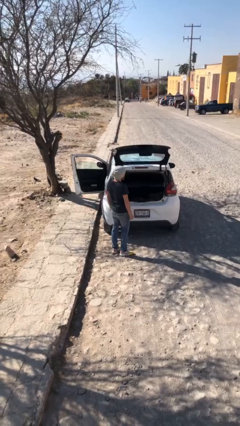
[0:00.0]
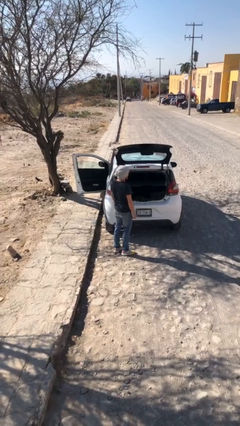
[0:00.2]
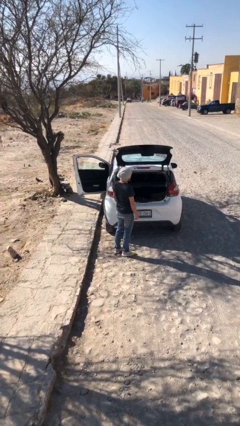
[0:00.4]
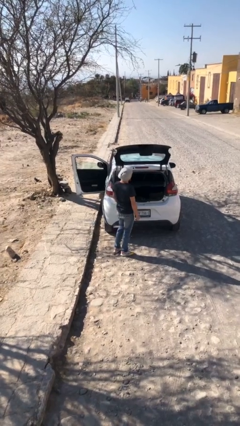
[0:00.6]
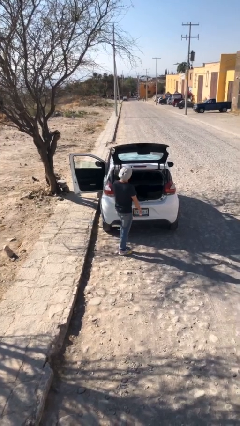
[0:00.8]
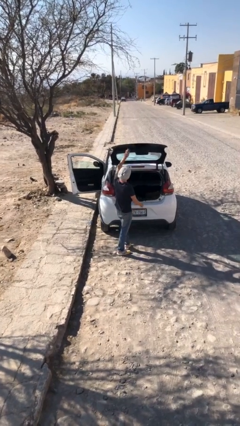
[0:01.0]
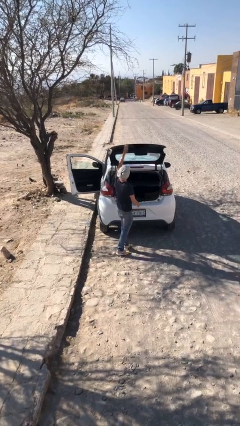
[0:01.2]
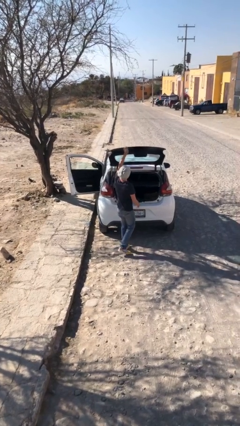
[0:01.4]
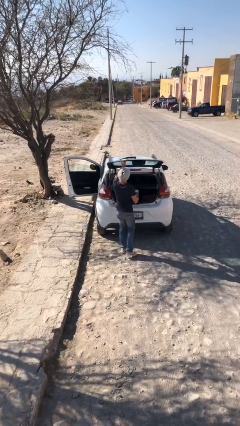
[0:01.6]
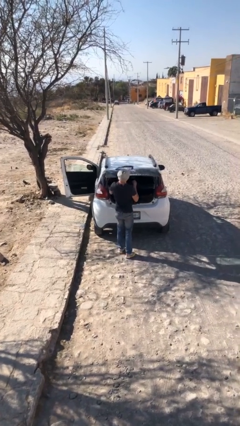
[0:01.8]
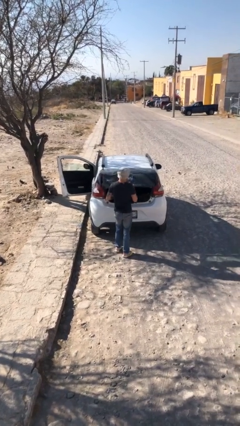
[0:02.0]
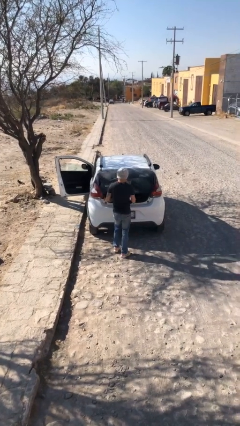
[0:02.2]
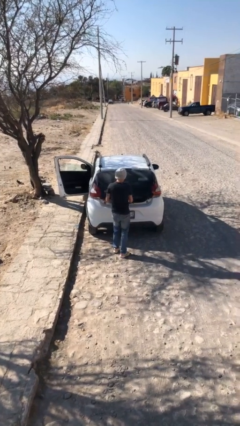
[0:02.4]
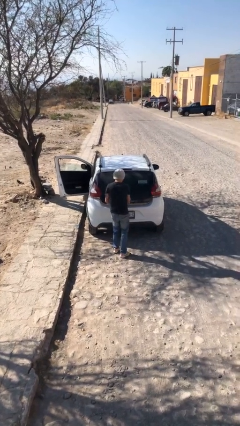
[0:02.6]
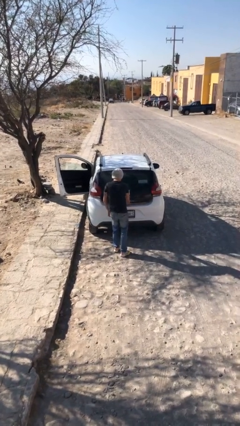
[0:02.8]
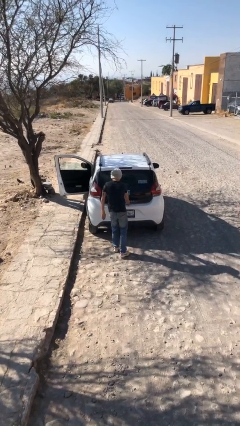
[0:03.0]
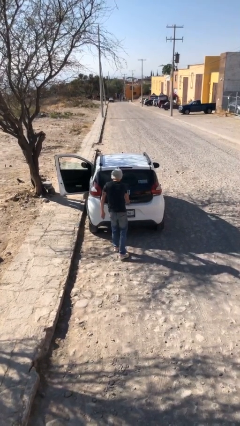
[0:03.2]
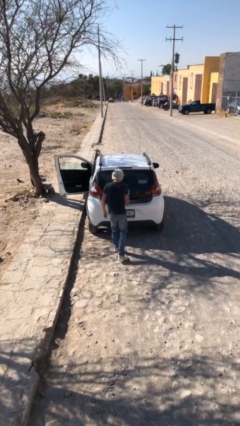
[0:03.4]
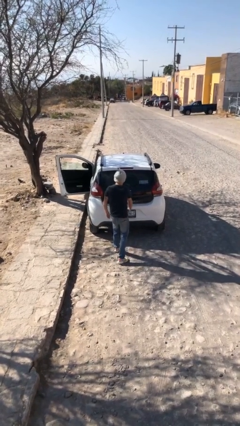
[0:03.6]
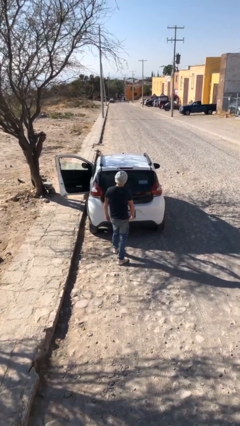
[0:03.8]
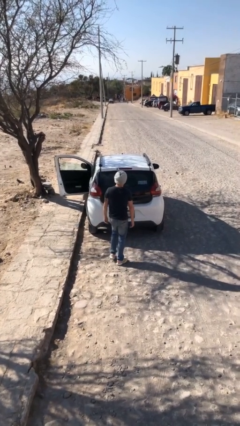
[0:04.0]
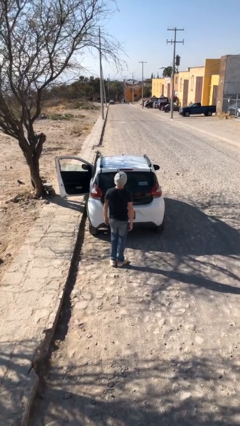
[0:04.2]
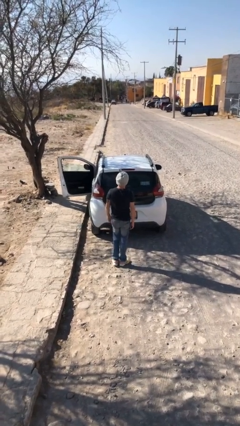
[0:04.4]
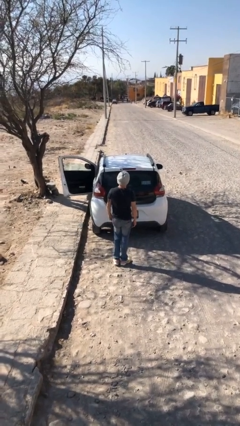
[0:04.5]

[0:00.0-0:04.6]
person closes car trunk

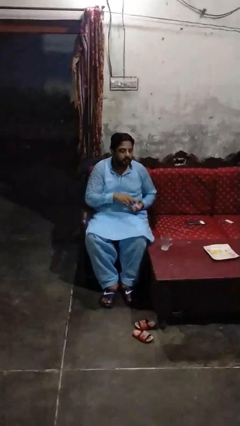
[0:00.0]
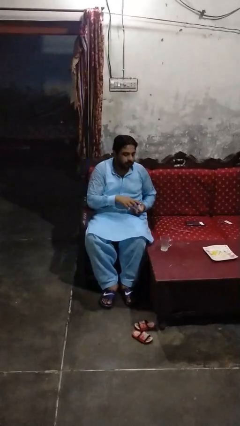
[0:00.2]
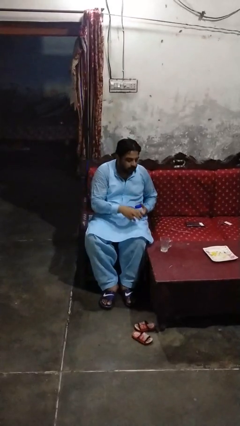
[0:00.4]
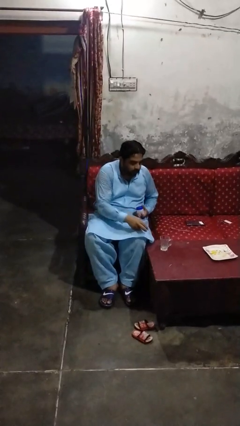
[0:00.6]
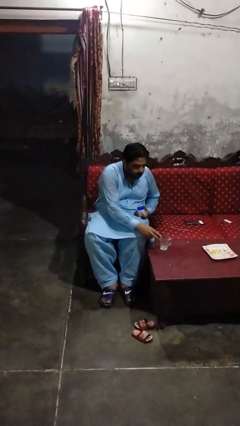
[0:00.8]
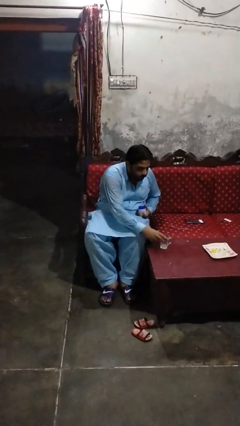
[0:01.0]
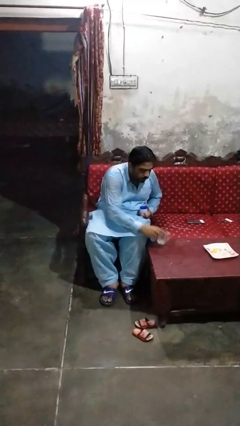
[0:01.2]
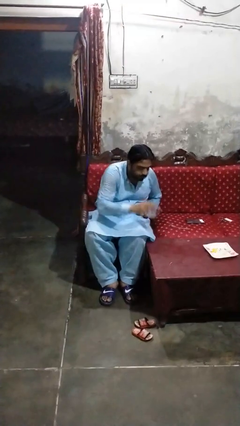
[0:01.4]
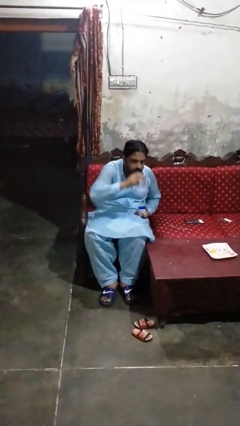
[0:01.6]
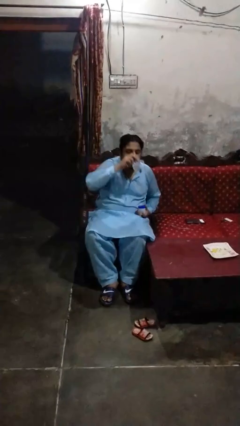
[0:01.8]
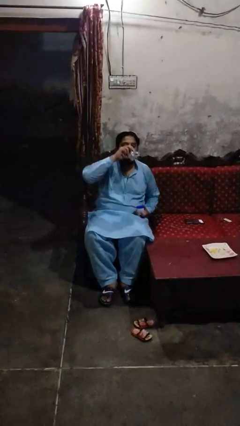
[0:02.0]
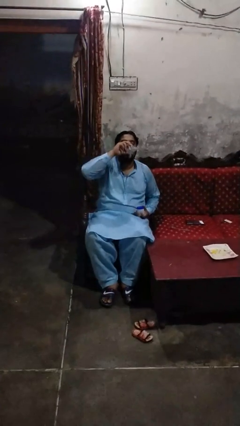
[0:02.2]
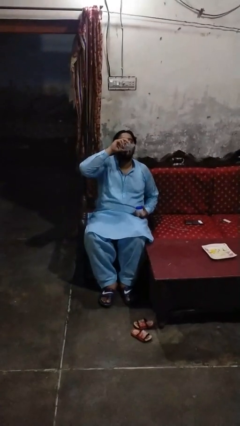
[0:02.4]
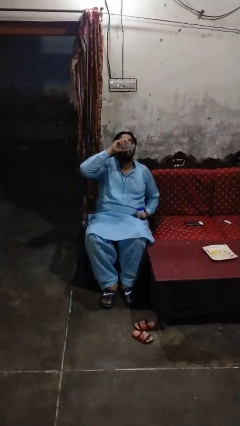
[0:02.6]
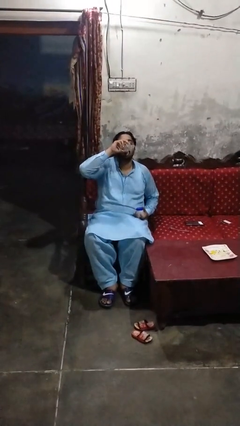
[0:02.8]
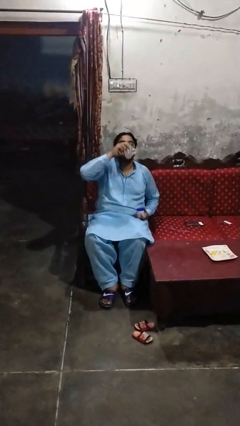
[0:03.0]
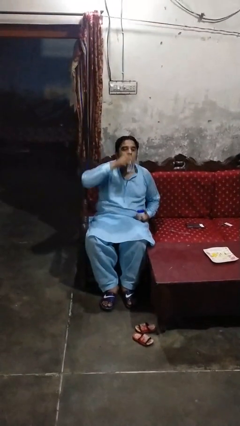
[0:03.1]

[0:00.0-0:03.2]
person drinks from cup

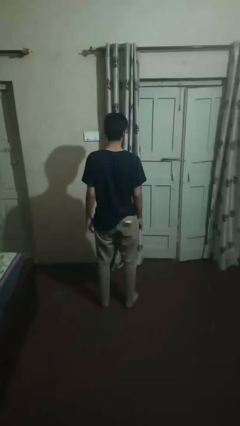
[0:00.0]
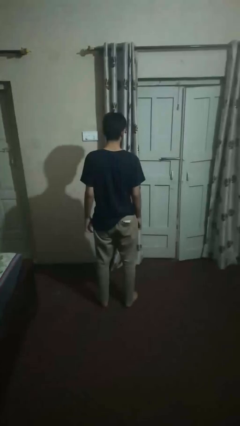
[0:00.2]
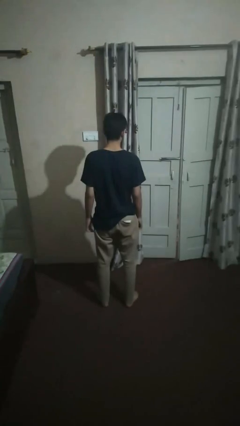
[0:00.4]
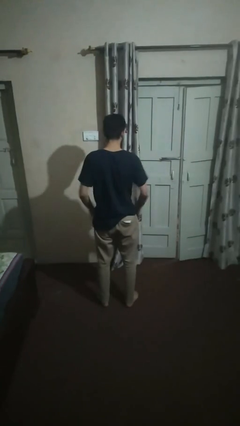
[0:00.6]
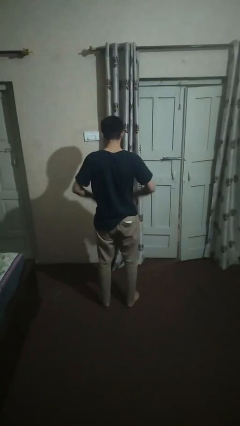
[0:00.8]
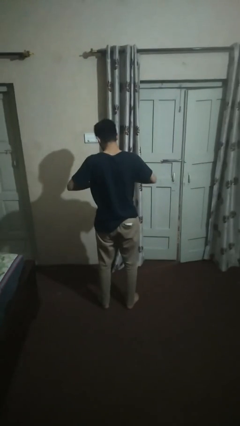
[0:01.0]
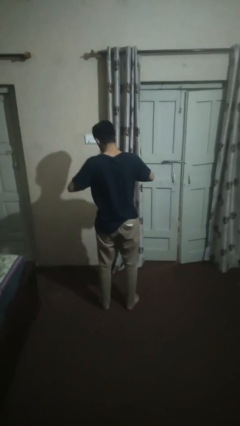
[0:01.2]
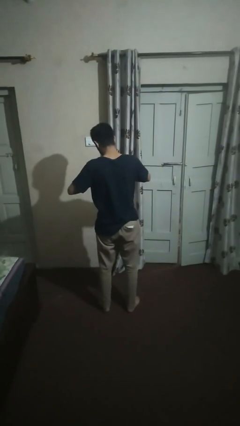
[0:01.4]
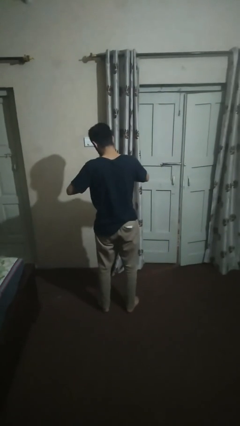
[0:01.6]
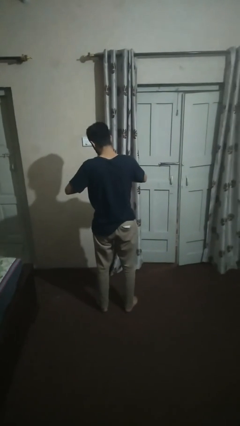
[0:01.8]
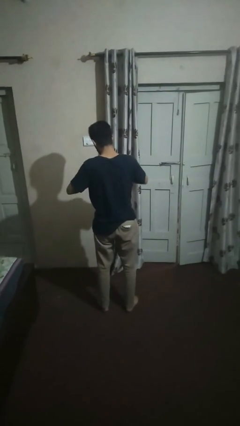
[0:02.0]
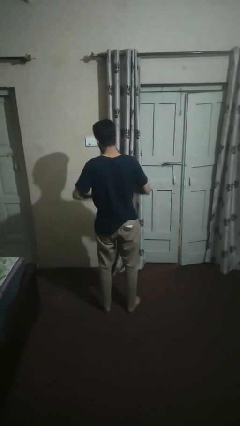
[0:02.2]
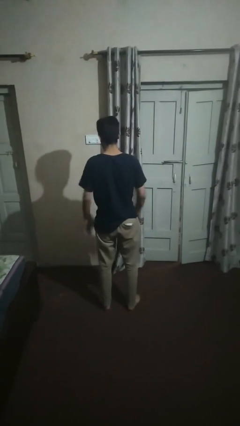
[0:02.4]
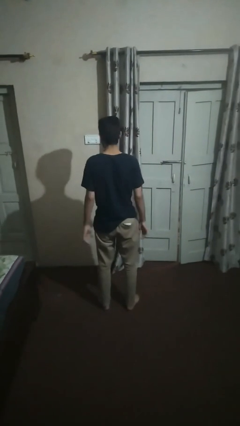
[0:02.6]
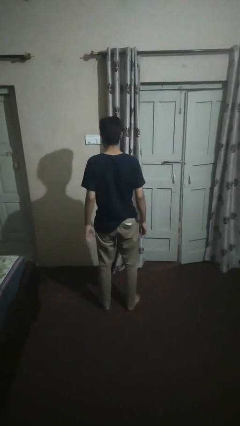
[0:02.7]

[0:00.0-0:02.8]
person puts on ring

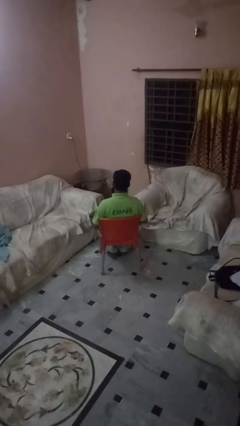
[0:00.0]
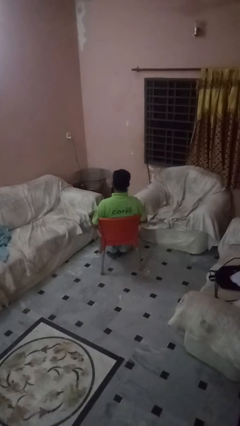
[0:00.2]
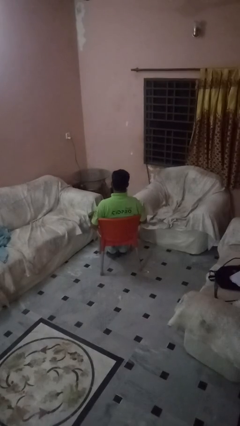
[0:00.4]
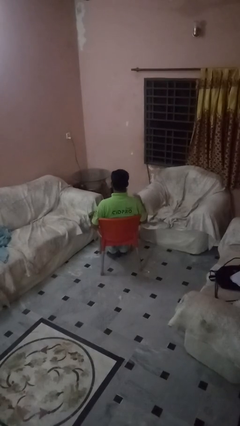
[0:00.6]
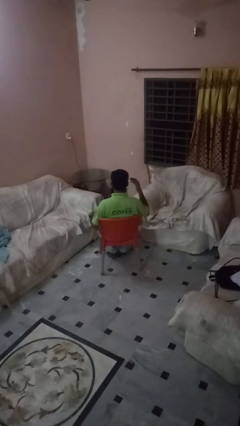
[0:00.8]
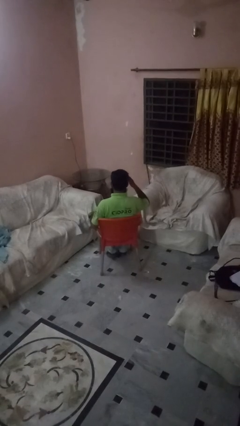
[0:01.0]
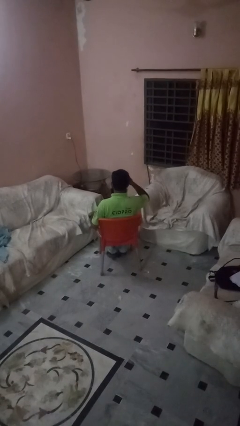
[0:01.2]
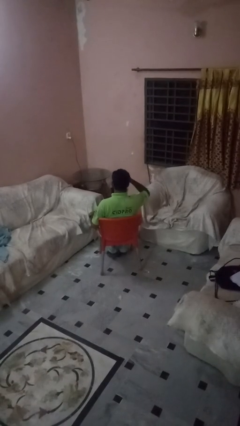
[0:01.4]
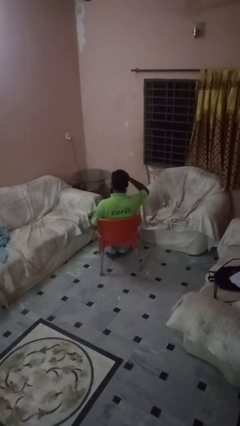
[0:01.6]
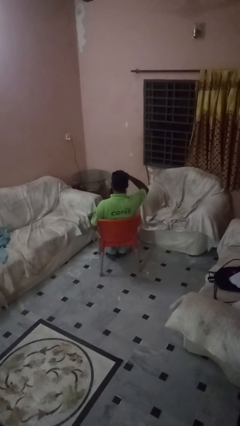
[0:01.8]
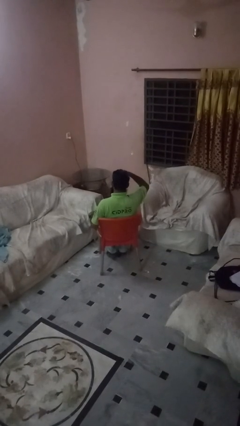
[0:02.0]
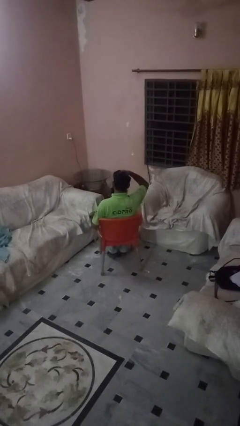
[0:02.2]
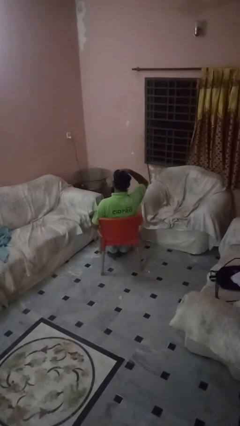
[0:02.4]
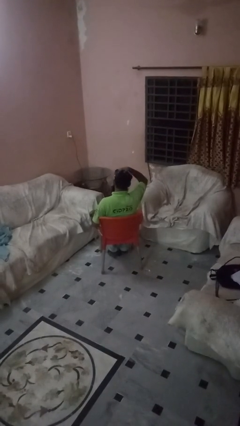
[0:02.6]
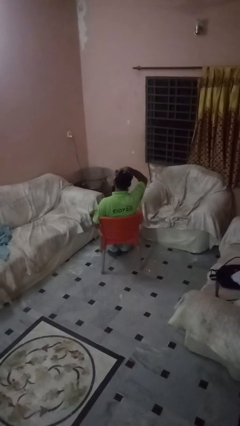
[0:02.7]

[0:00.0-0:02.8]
person strokes hair

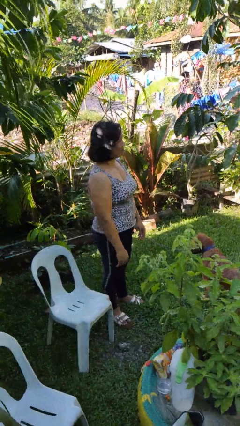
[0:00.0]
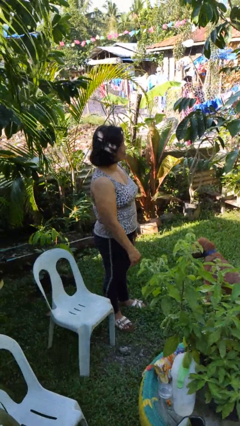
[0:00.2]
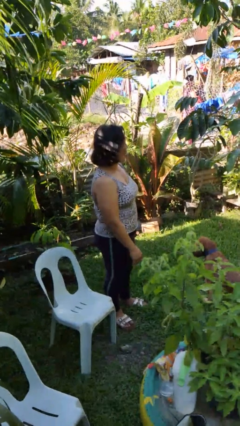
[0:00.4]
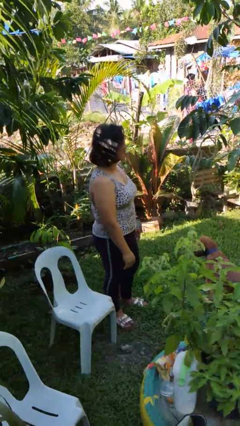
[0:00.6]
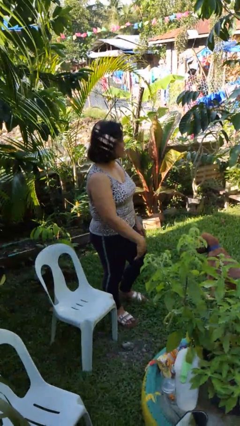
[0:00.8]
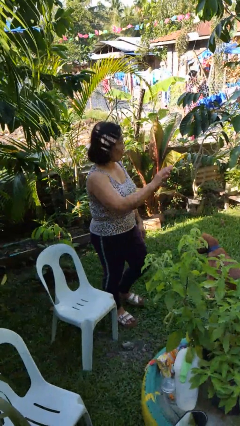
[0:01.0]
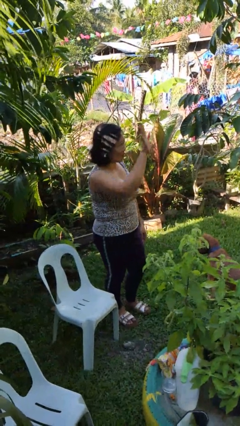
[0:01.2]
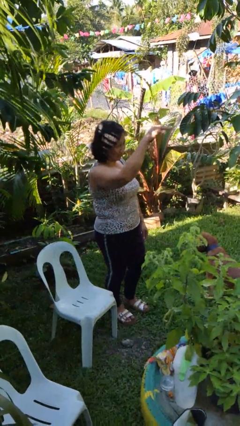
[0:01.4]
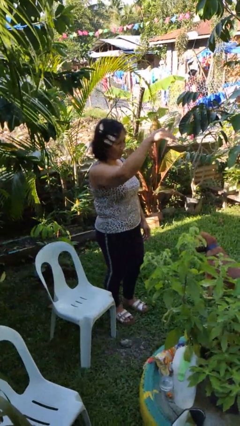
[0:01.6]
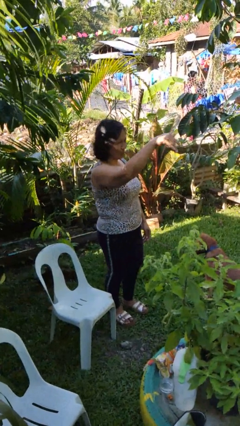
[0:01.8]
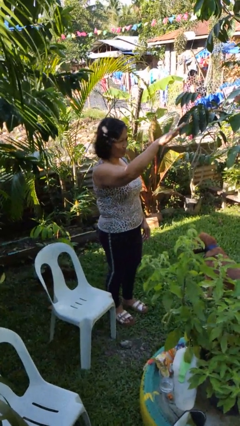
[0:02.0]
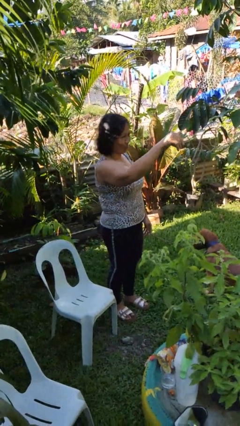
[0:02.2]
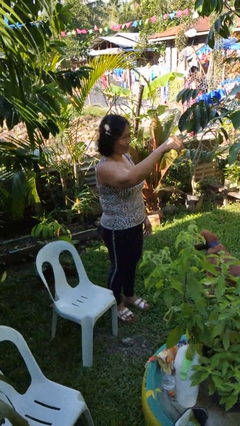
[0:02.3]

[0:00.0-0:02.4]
person gestures come here

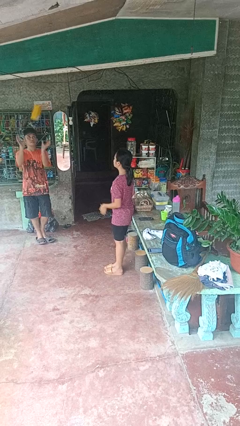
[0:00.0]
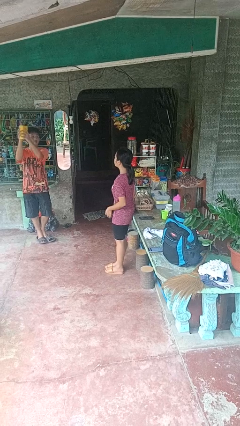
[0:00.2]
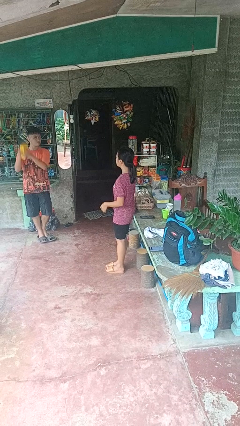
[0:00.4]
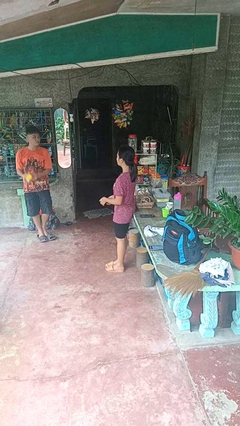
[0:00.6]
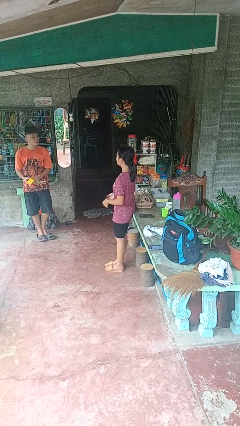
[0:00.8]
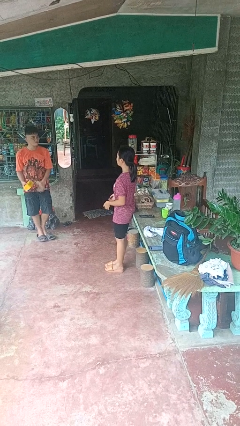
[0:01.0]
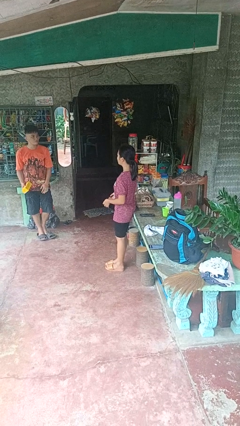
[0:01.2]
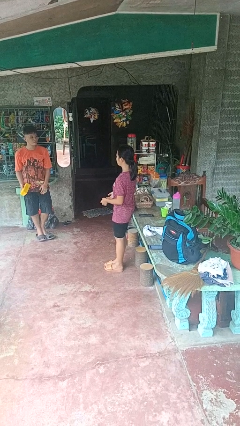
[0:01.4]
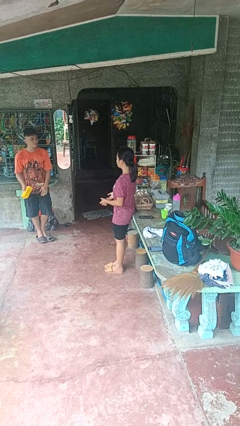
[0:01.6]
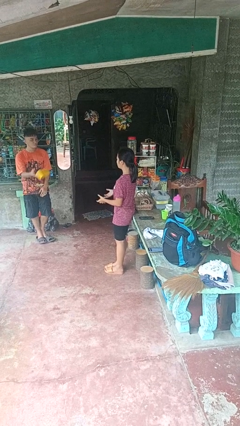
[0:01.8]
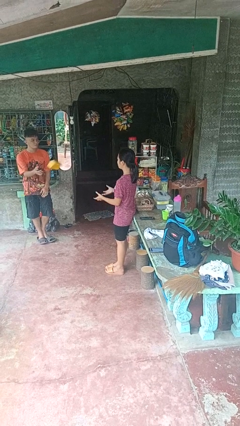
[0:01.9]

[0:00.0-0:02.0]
person throws object to person
